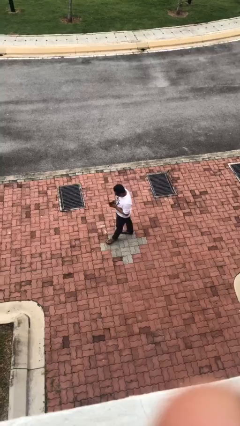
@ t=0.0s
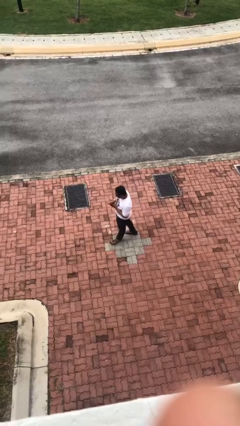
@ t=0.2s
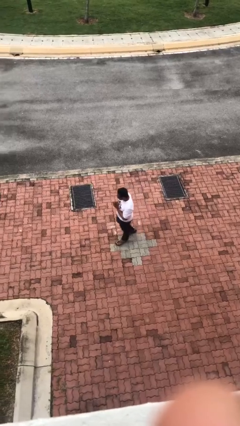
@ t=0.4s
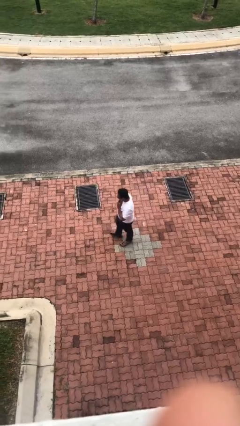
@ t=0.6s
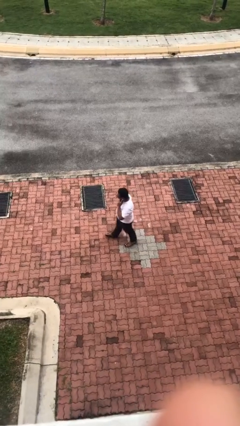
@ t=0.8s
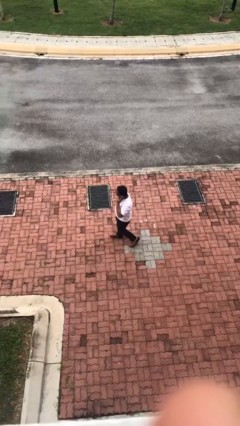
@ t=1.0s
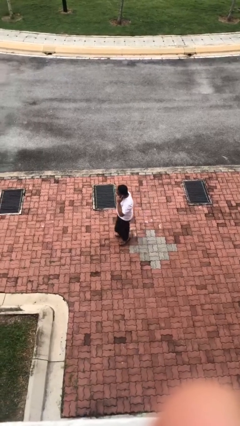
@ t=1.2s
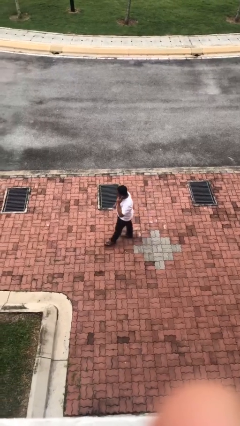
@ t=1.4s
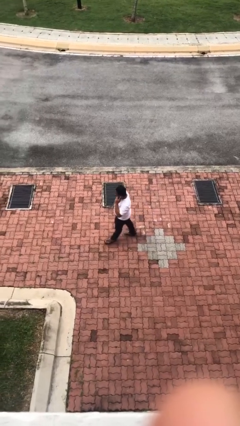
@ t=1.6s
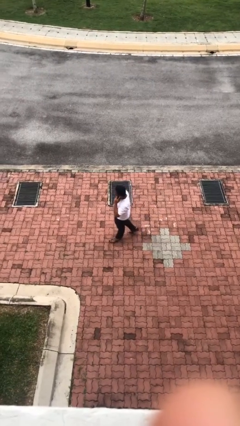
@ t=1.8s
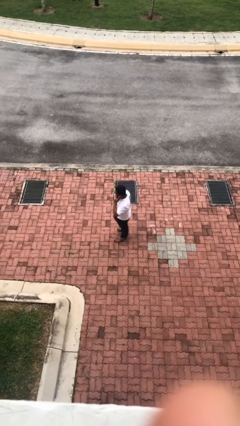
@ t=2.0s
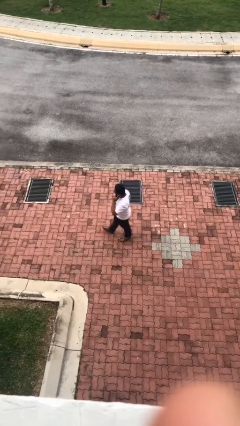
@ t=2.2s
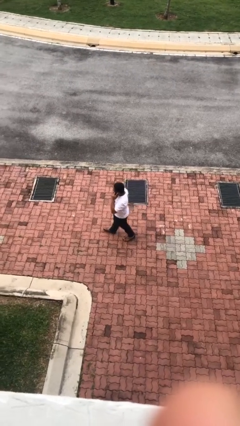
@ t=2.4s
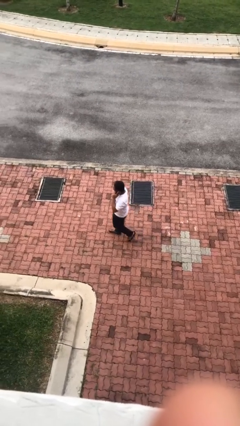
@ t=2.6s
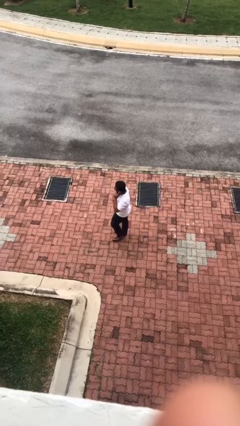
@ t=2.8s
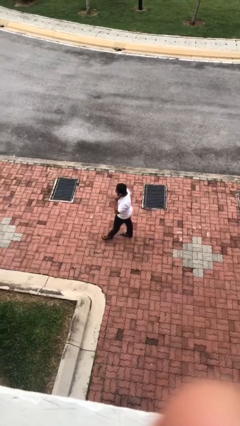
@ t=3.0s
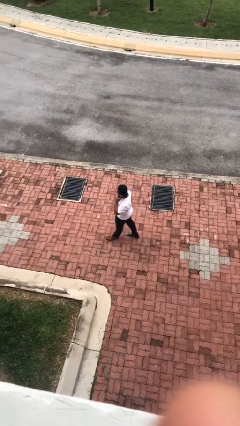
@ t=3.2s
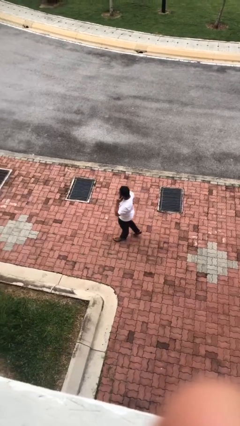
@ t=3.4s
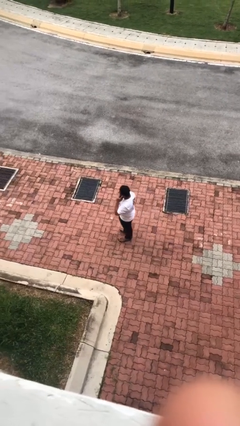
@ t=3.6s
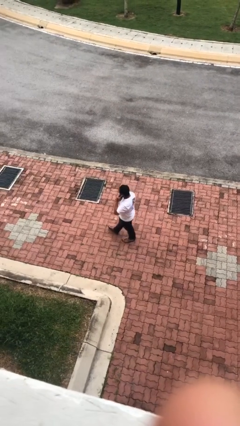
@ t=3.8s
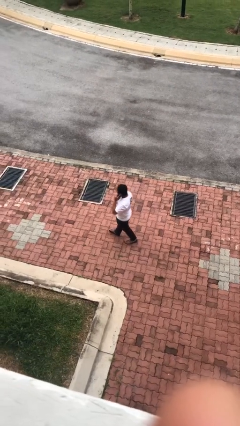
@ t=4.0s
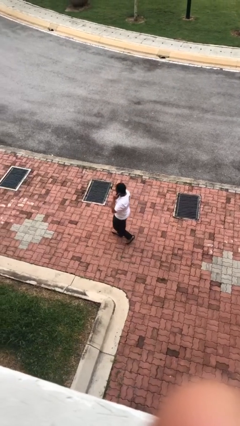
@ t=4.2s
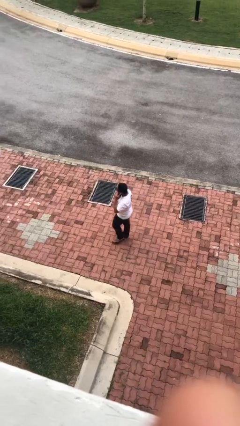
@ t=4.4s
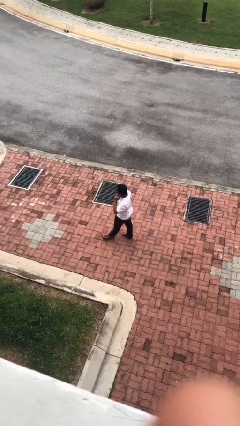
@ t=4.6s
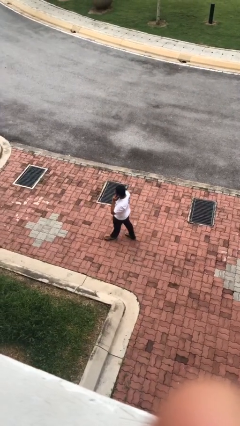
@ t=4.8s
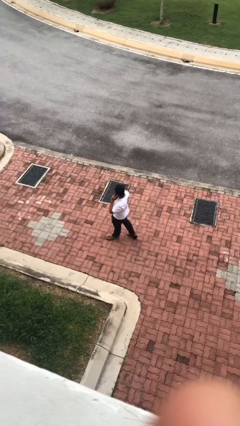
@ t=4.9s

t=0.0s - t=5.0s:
person talks on phone

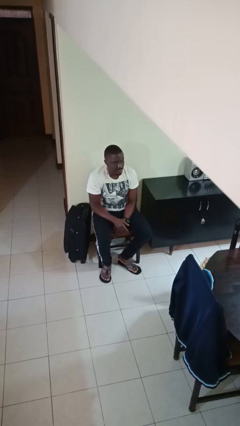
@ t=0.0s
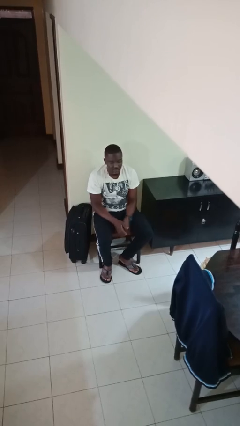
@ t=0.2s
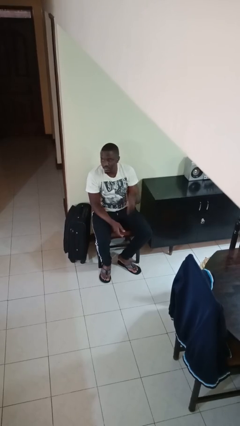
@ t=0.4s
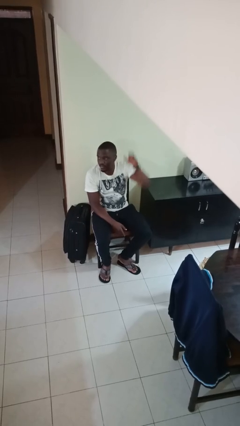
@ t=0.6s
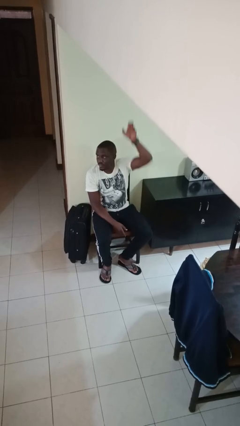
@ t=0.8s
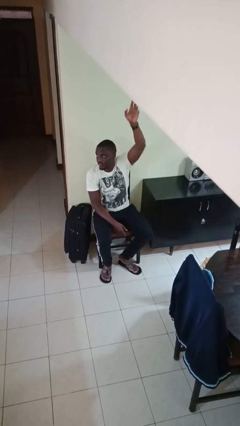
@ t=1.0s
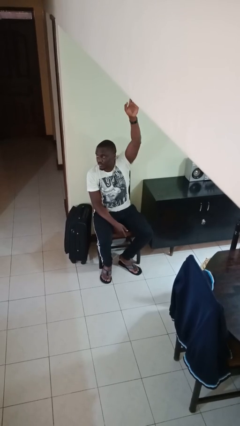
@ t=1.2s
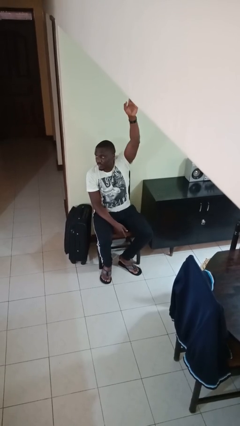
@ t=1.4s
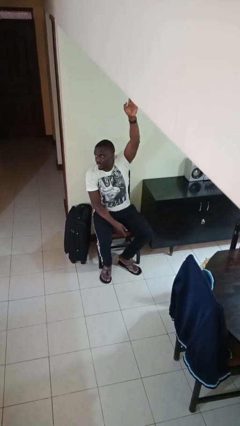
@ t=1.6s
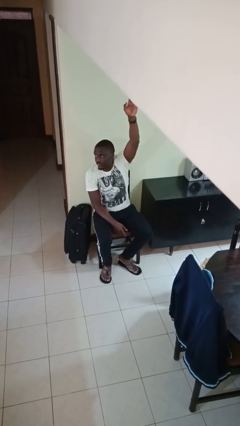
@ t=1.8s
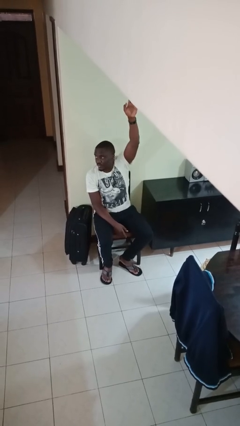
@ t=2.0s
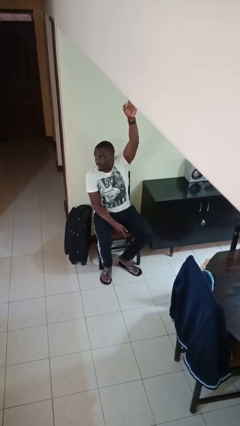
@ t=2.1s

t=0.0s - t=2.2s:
person gestures raise hand

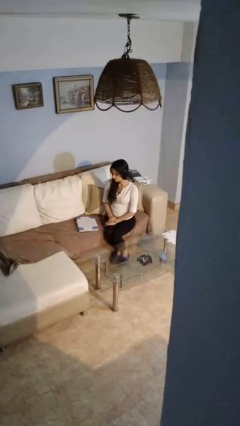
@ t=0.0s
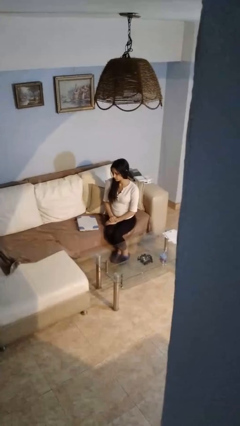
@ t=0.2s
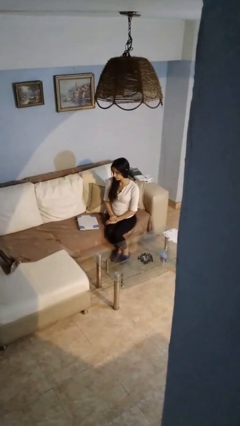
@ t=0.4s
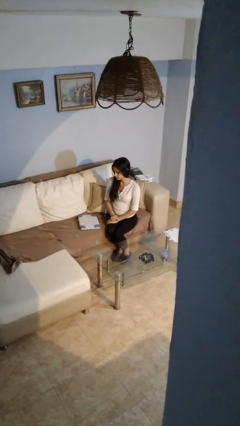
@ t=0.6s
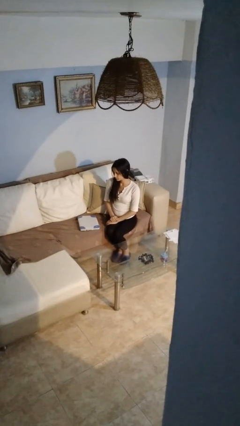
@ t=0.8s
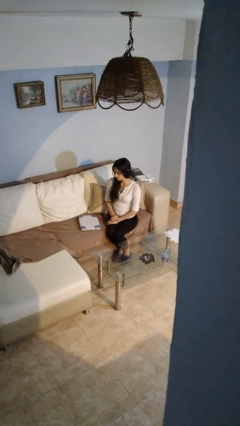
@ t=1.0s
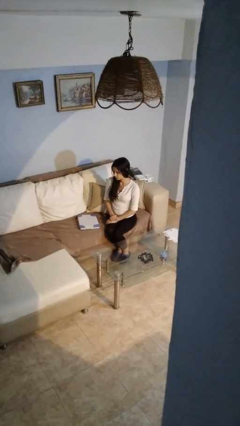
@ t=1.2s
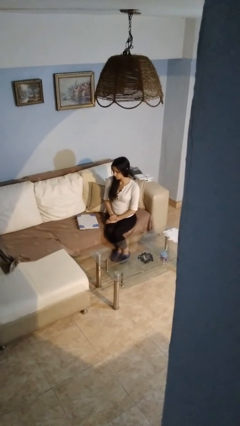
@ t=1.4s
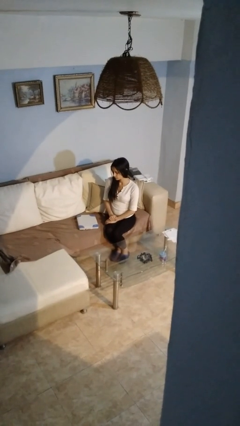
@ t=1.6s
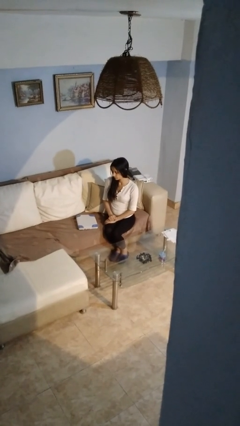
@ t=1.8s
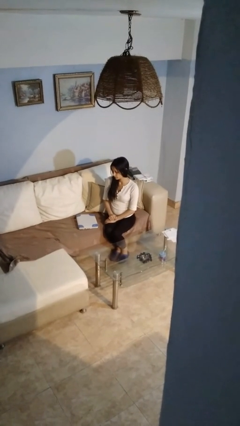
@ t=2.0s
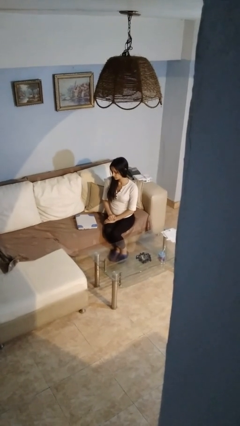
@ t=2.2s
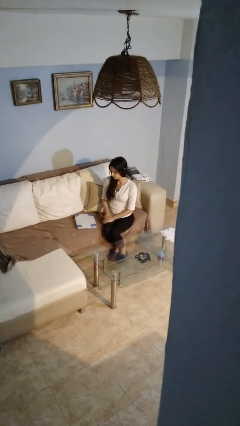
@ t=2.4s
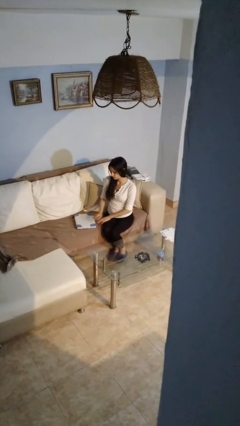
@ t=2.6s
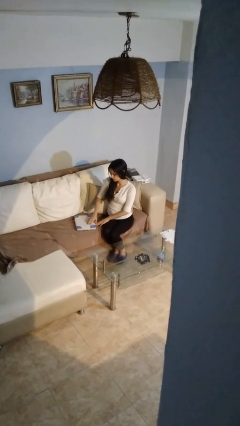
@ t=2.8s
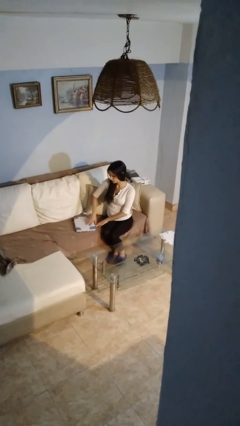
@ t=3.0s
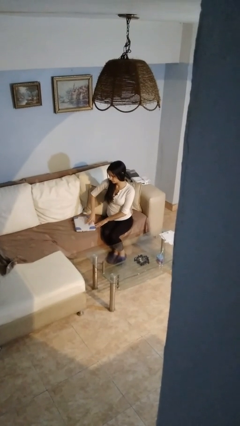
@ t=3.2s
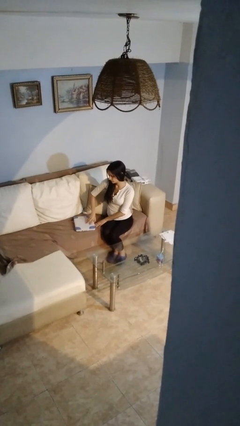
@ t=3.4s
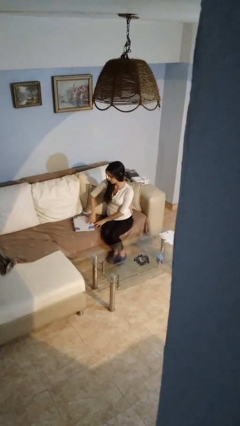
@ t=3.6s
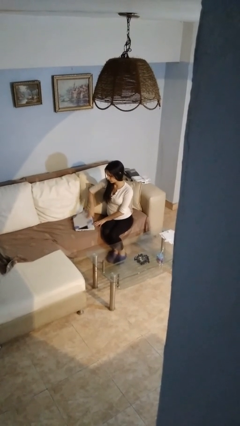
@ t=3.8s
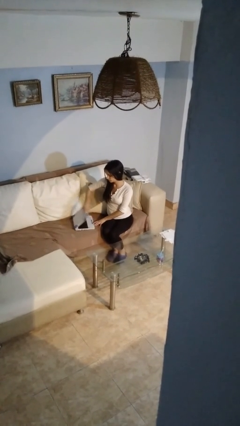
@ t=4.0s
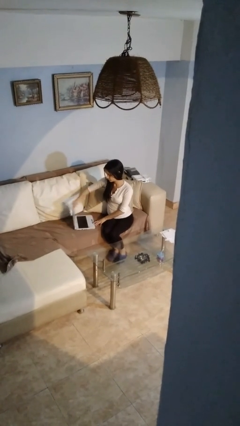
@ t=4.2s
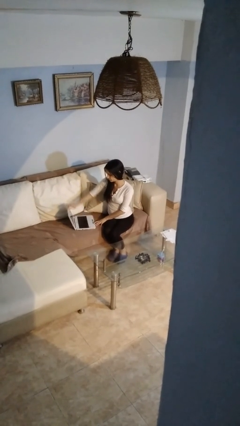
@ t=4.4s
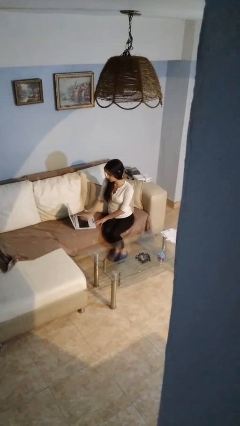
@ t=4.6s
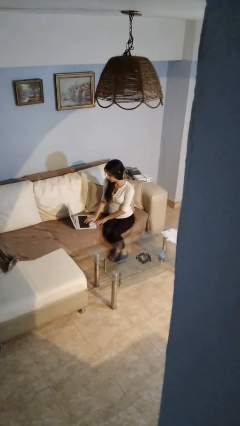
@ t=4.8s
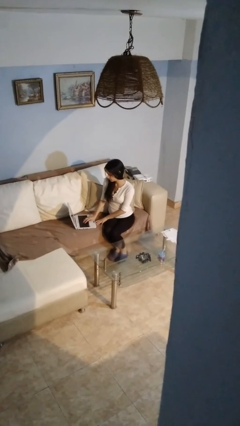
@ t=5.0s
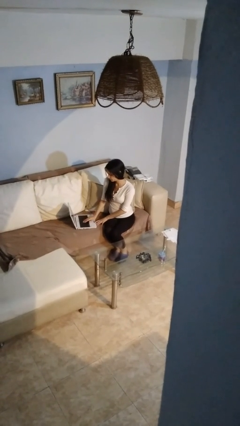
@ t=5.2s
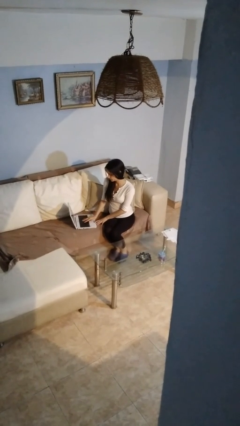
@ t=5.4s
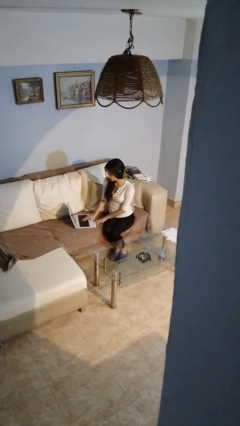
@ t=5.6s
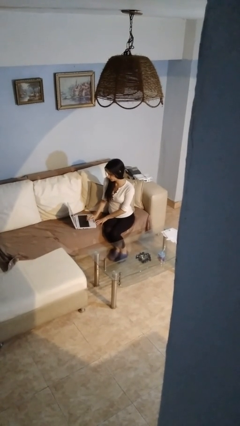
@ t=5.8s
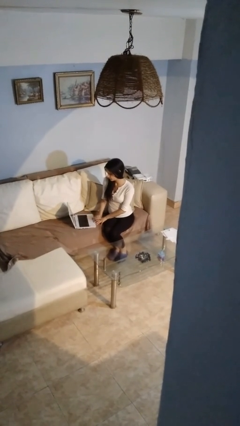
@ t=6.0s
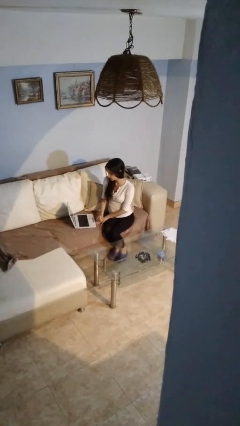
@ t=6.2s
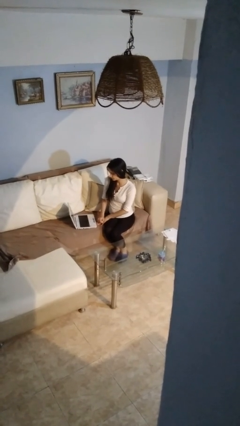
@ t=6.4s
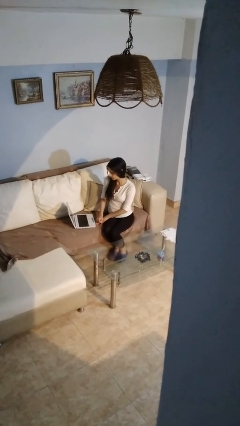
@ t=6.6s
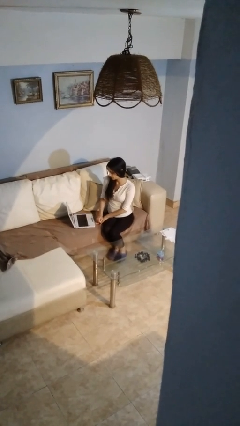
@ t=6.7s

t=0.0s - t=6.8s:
person opens laptop

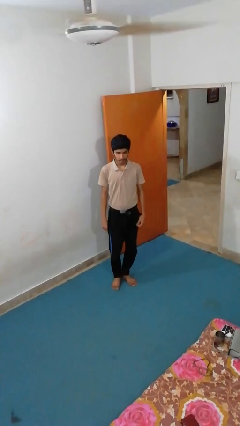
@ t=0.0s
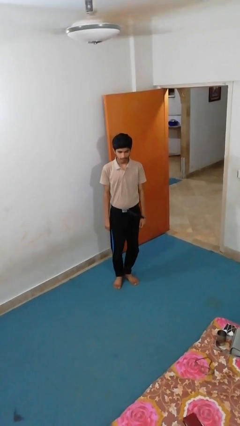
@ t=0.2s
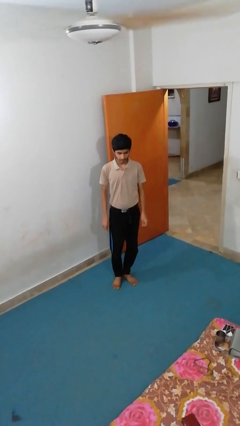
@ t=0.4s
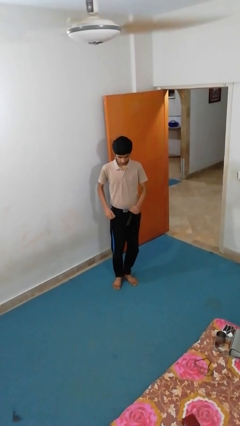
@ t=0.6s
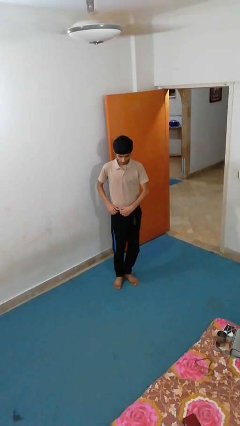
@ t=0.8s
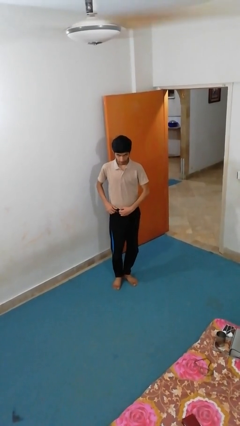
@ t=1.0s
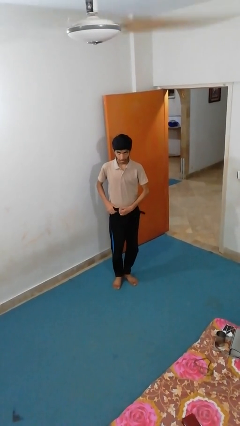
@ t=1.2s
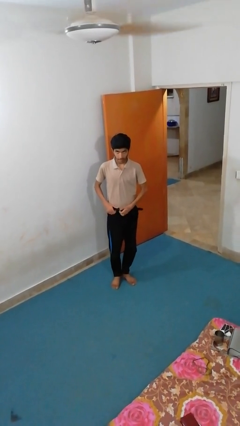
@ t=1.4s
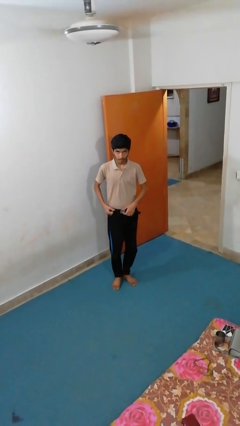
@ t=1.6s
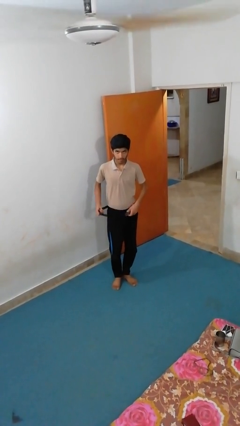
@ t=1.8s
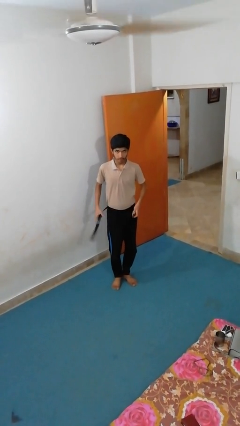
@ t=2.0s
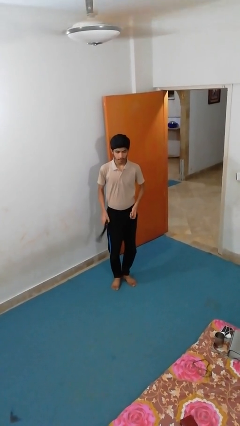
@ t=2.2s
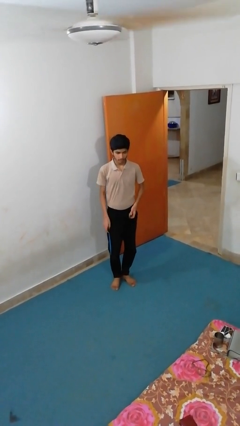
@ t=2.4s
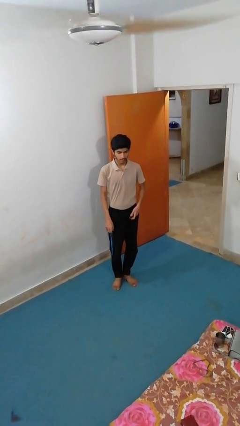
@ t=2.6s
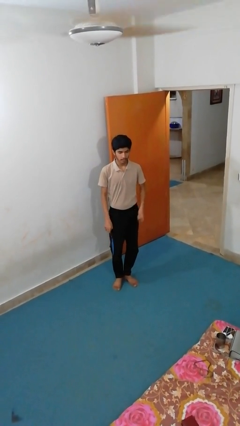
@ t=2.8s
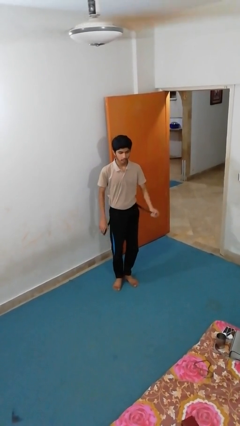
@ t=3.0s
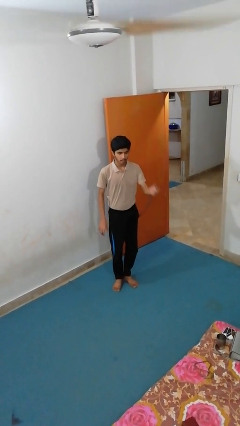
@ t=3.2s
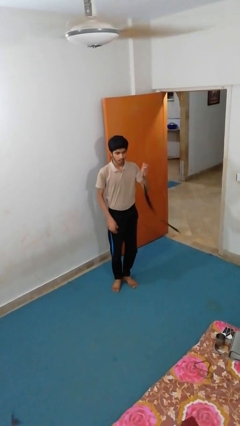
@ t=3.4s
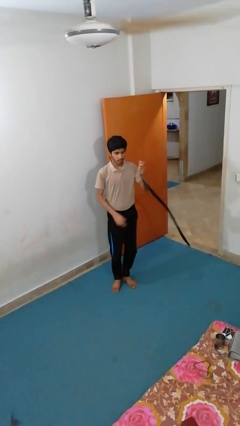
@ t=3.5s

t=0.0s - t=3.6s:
person takes off belt

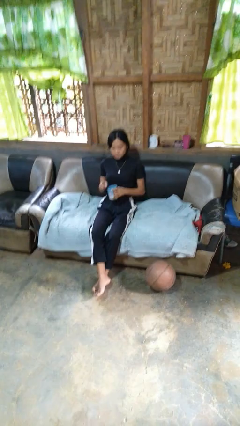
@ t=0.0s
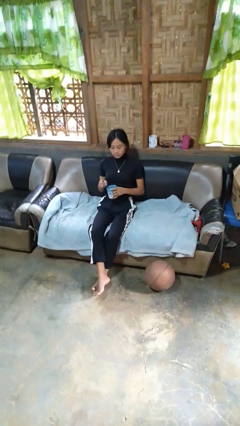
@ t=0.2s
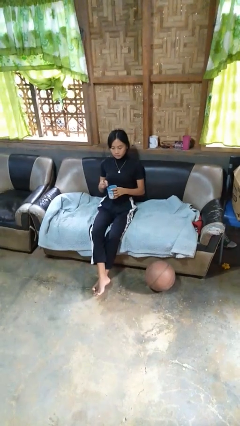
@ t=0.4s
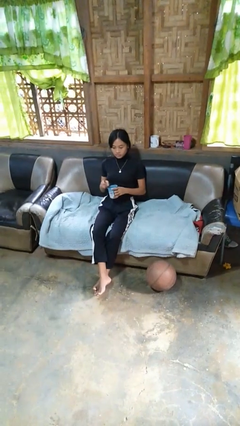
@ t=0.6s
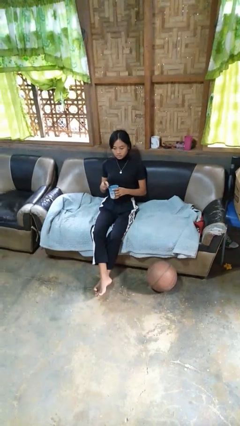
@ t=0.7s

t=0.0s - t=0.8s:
person stirs mug
